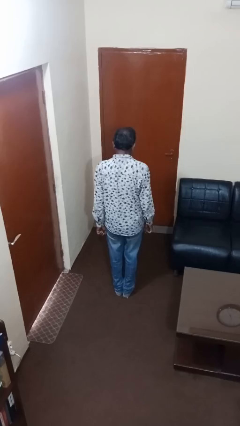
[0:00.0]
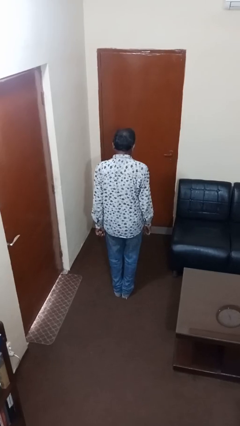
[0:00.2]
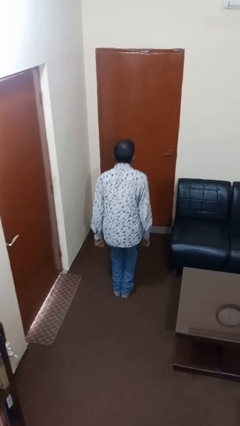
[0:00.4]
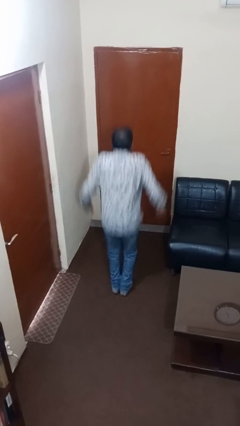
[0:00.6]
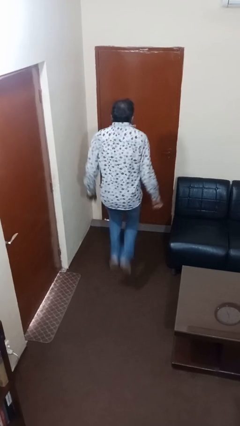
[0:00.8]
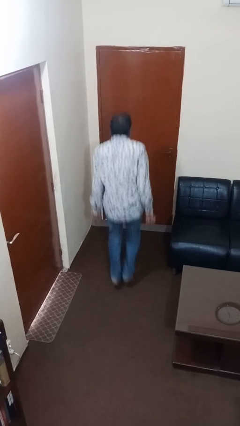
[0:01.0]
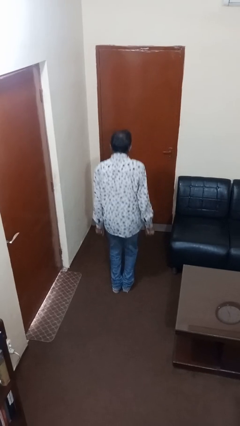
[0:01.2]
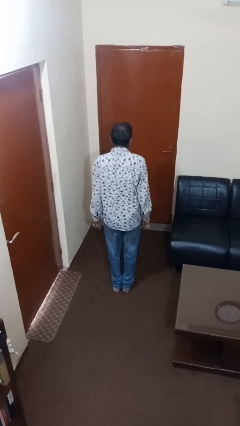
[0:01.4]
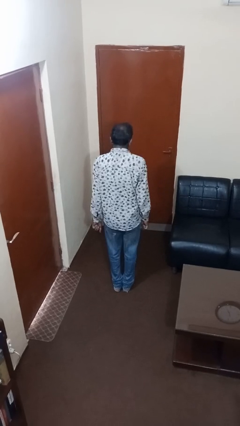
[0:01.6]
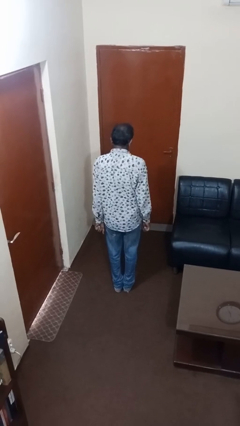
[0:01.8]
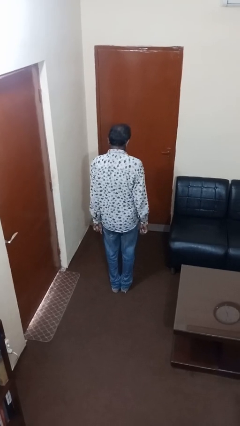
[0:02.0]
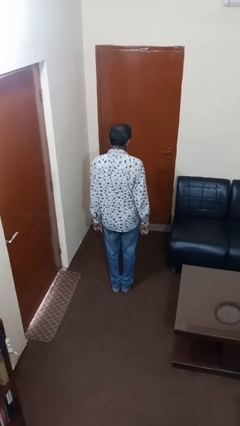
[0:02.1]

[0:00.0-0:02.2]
person jumps

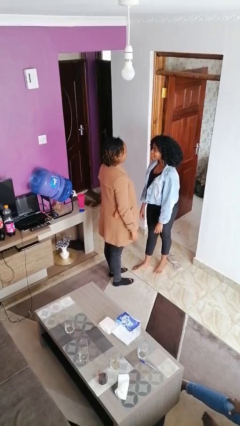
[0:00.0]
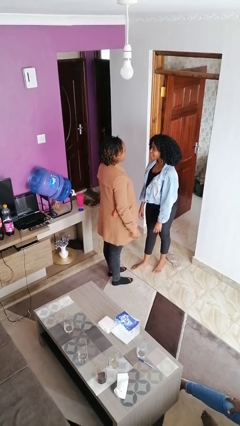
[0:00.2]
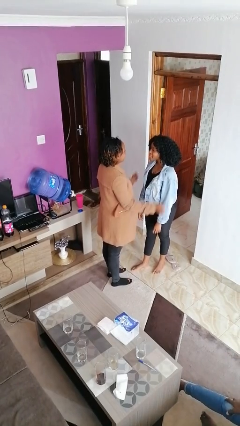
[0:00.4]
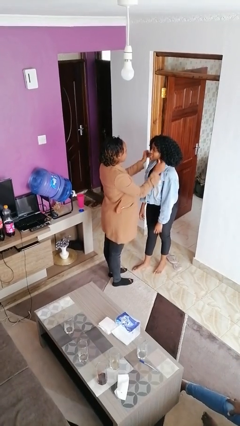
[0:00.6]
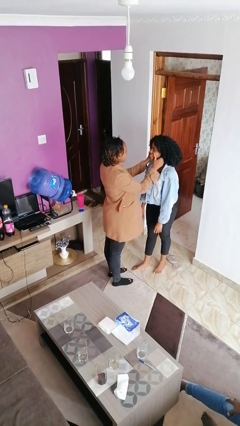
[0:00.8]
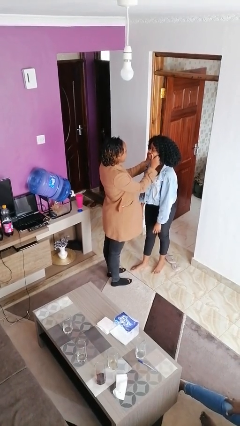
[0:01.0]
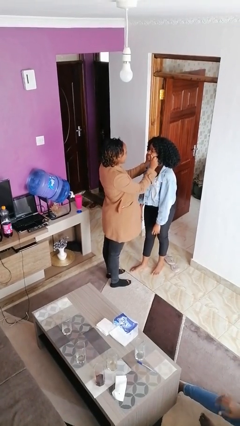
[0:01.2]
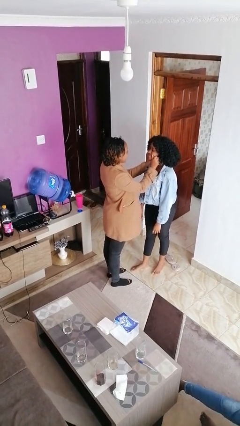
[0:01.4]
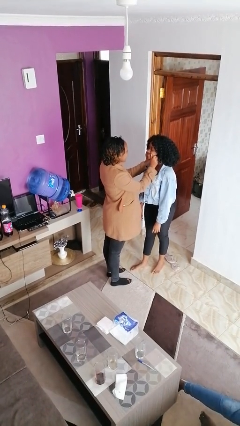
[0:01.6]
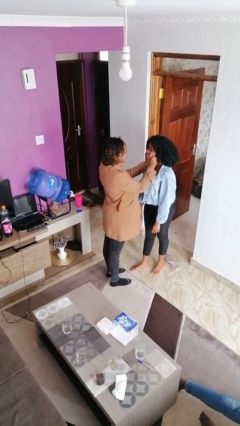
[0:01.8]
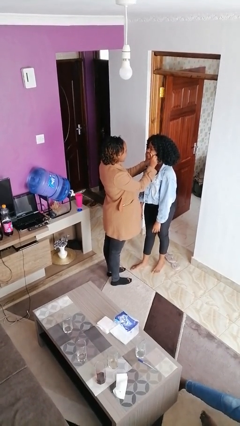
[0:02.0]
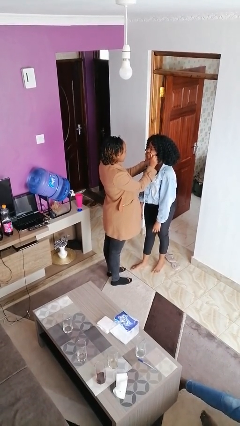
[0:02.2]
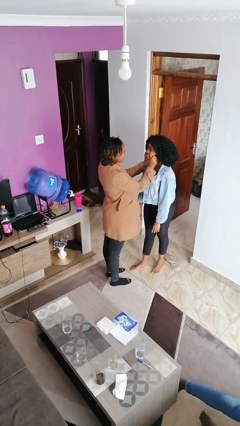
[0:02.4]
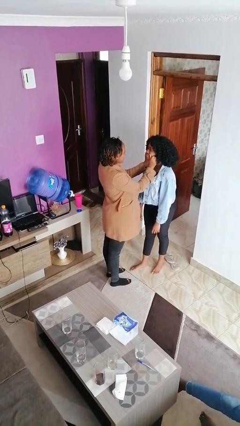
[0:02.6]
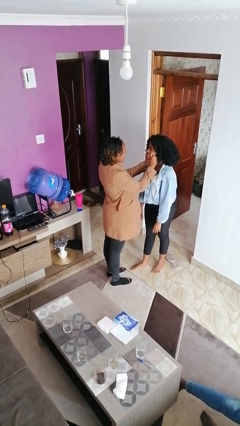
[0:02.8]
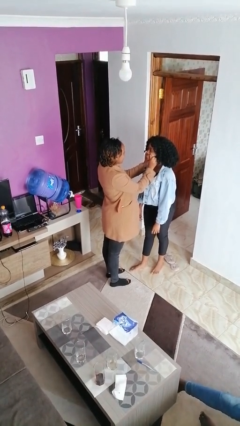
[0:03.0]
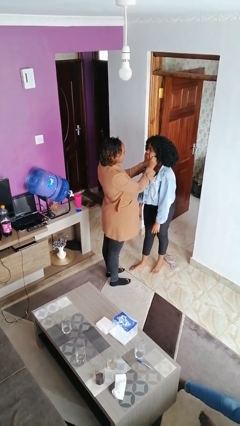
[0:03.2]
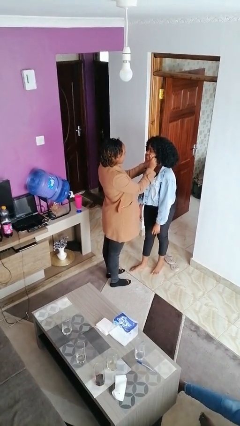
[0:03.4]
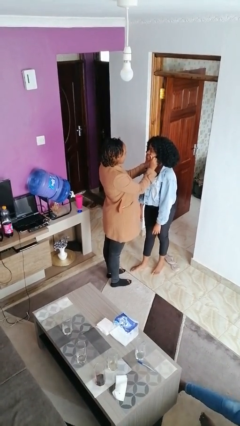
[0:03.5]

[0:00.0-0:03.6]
person touches face of person

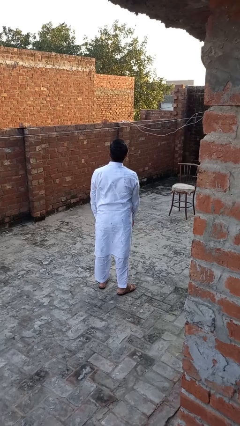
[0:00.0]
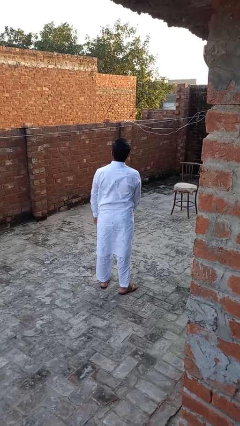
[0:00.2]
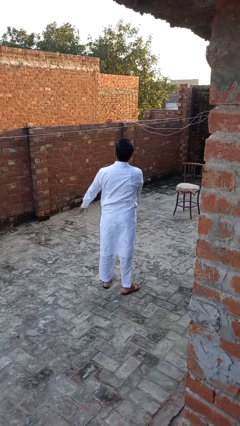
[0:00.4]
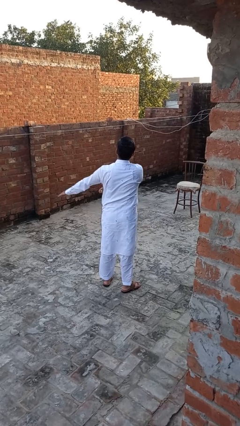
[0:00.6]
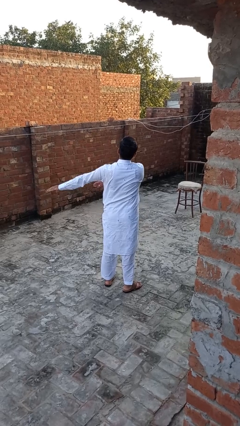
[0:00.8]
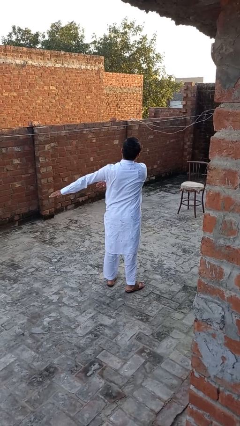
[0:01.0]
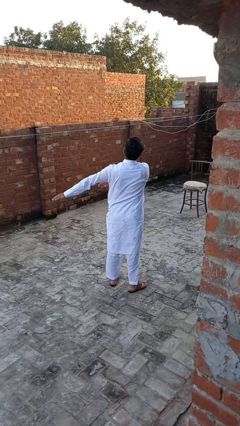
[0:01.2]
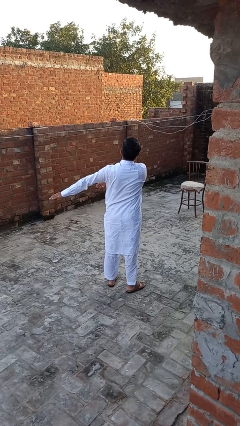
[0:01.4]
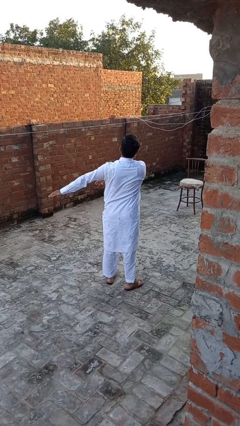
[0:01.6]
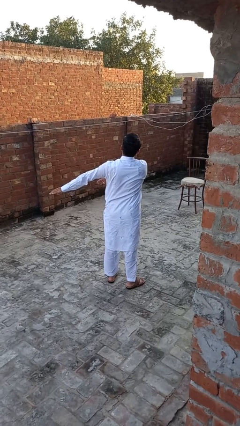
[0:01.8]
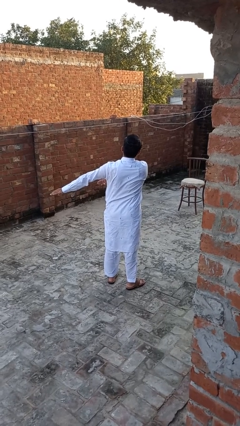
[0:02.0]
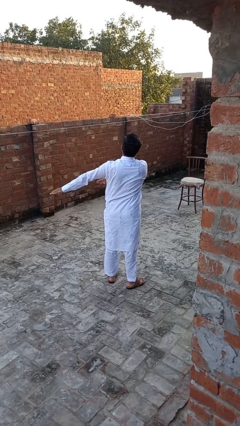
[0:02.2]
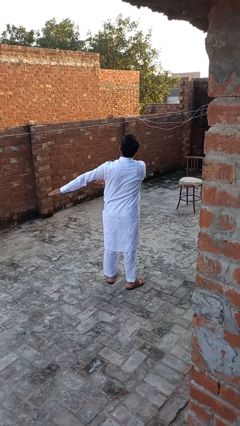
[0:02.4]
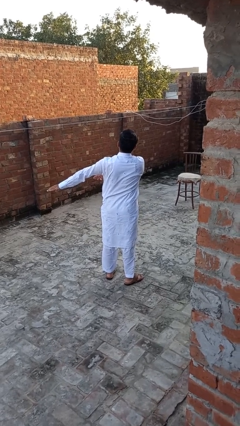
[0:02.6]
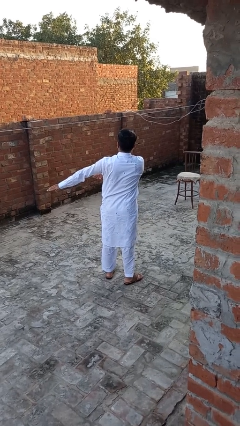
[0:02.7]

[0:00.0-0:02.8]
person gestures swipe left

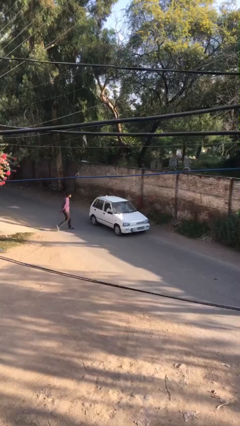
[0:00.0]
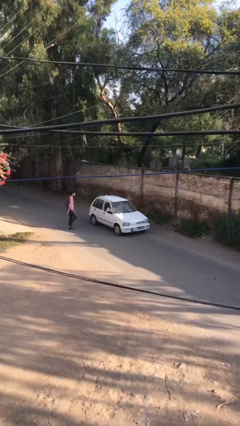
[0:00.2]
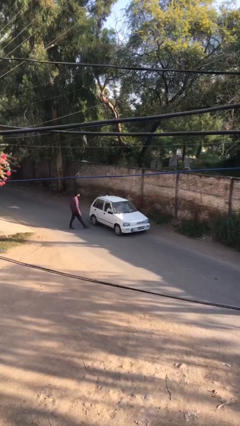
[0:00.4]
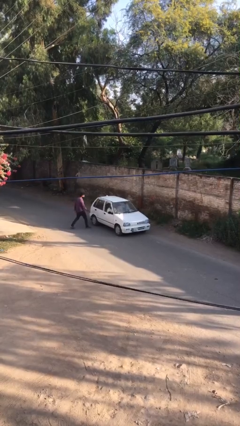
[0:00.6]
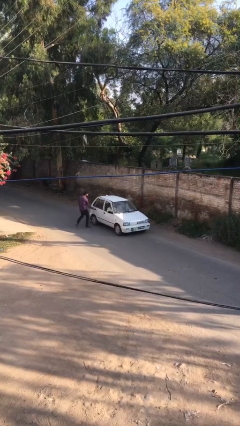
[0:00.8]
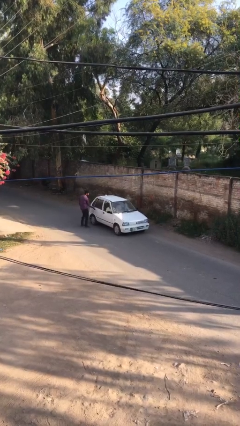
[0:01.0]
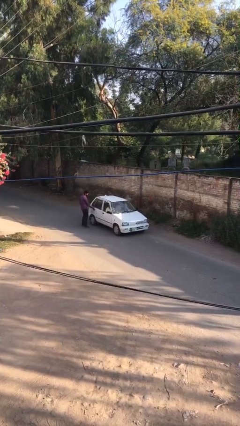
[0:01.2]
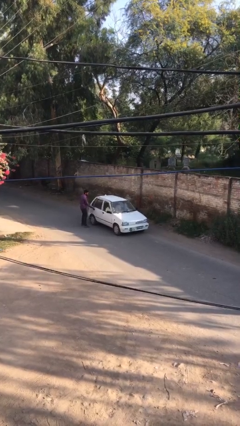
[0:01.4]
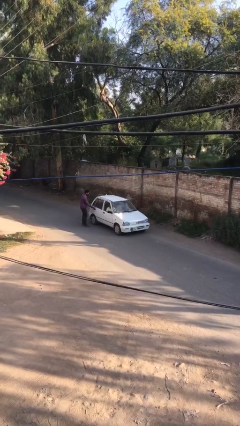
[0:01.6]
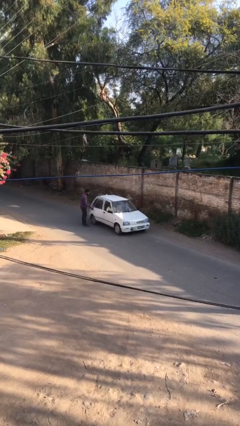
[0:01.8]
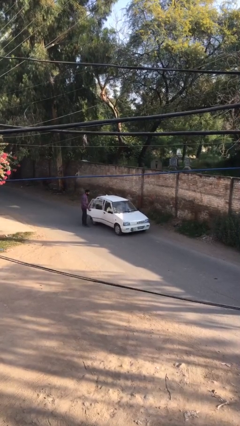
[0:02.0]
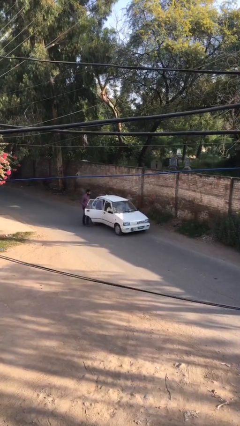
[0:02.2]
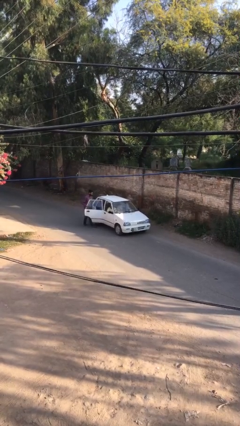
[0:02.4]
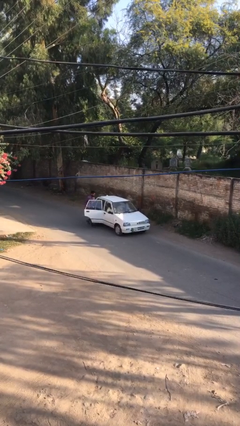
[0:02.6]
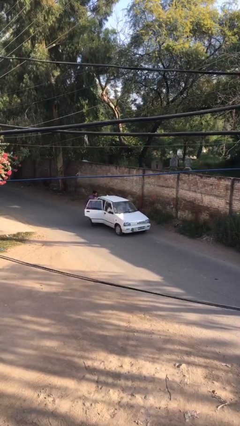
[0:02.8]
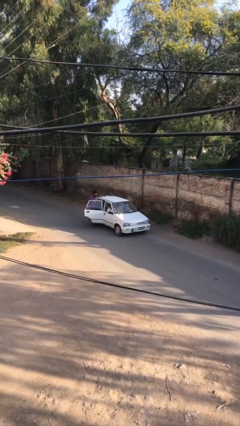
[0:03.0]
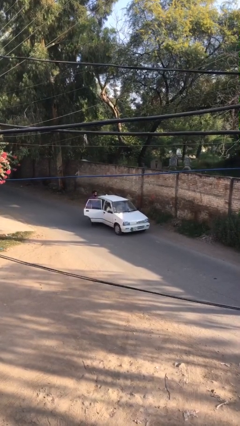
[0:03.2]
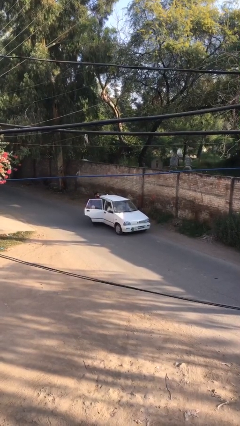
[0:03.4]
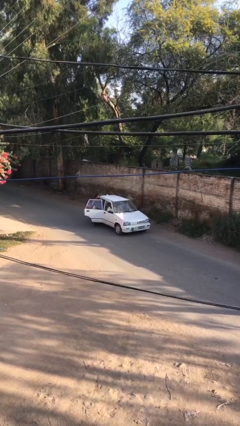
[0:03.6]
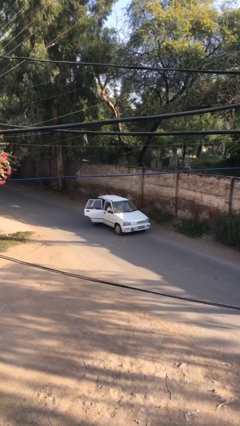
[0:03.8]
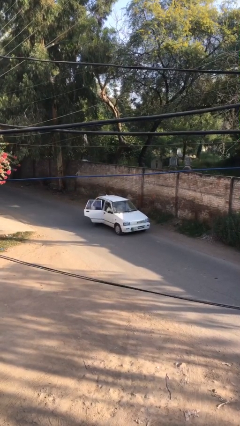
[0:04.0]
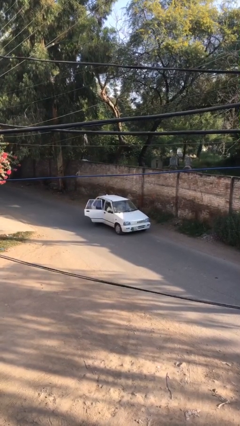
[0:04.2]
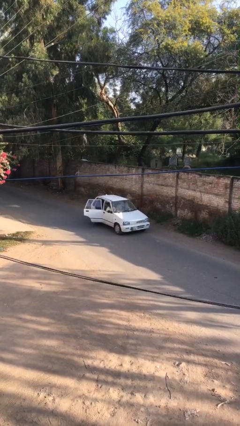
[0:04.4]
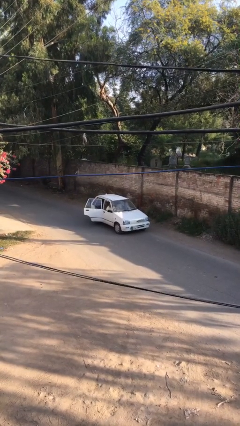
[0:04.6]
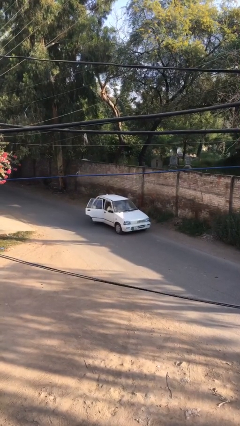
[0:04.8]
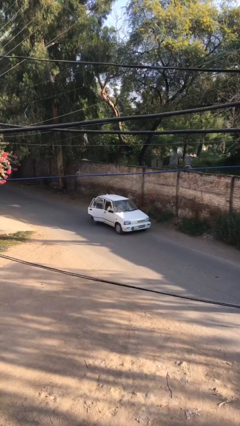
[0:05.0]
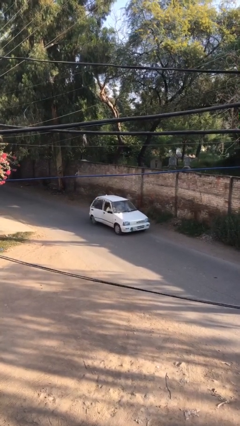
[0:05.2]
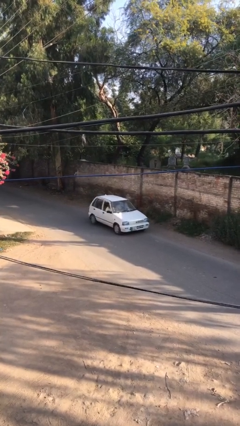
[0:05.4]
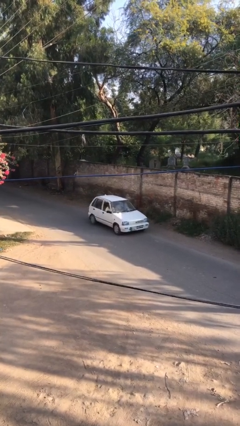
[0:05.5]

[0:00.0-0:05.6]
car picks up person

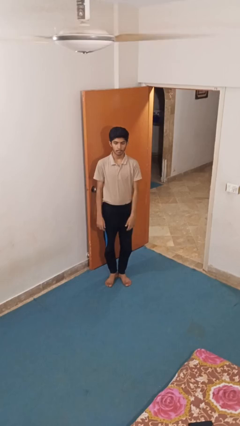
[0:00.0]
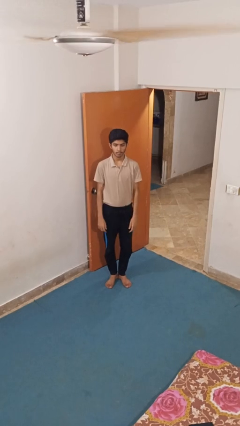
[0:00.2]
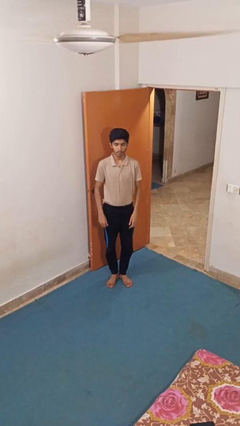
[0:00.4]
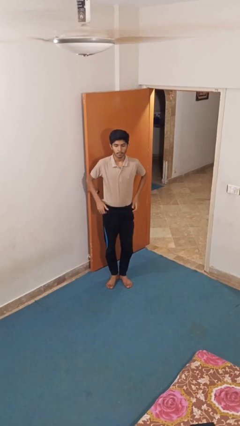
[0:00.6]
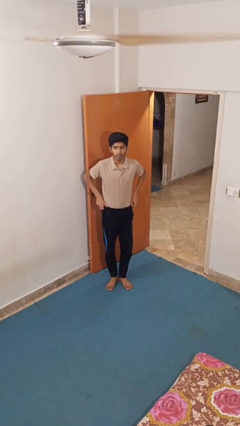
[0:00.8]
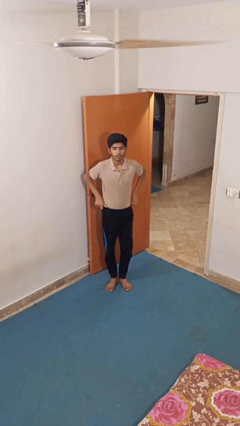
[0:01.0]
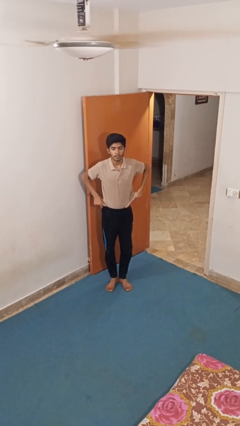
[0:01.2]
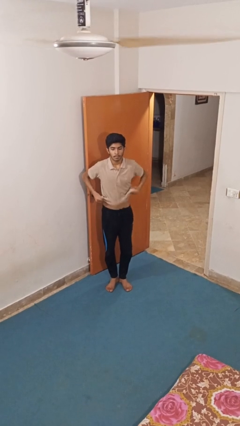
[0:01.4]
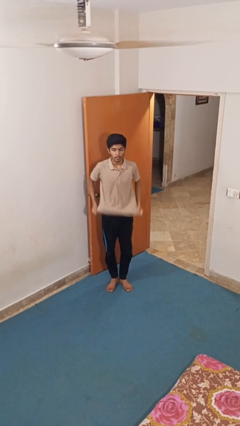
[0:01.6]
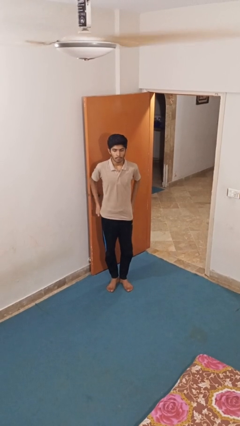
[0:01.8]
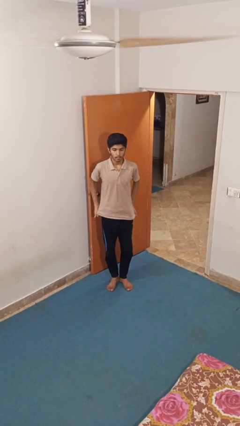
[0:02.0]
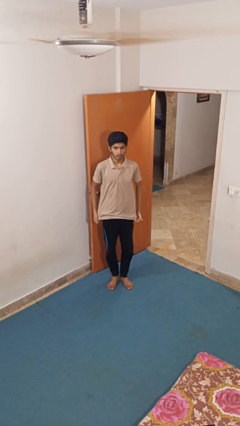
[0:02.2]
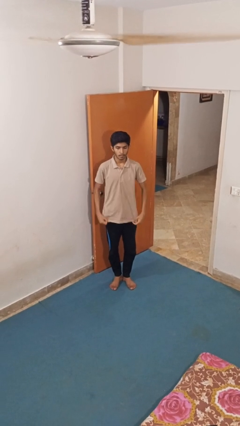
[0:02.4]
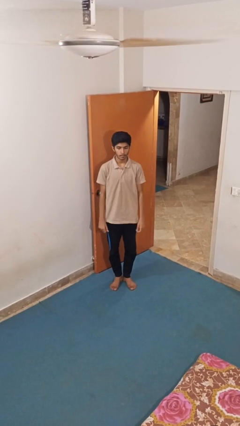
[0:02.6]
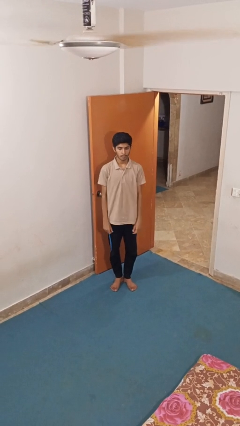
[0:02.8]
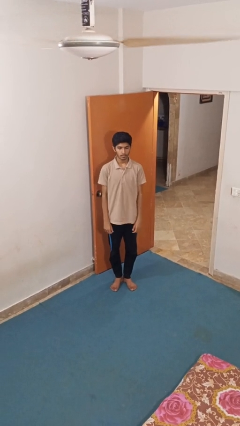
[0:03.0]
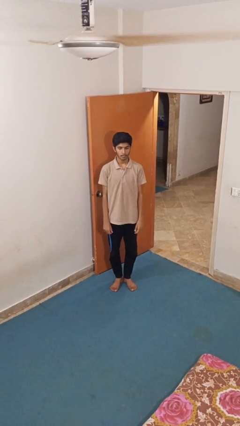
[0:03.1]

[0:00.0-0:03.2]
person untucks shirt

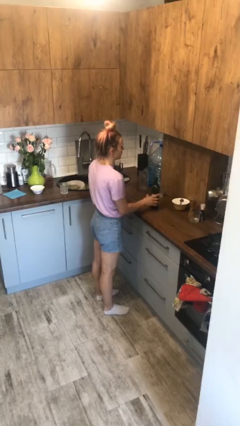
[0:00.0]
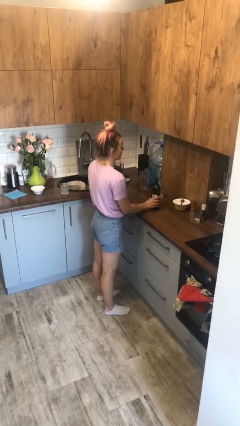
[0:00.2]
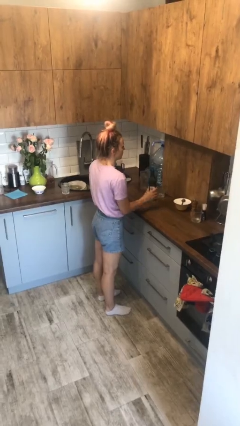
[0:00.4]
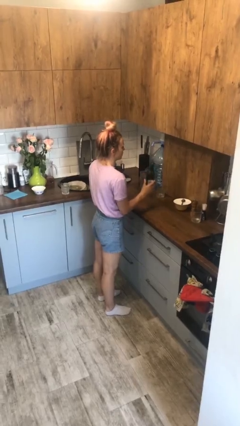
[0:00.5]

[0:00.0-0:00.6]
person picks up object from countertop
